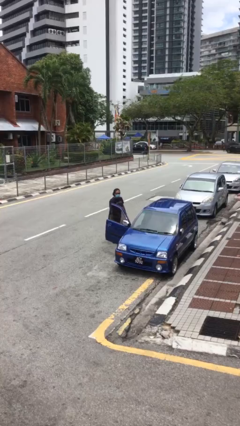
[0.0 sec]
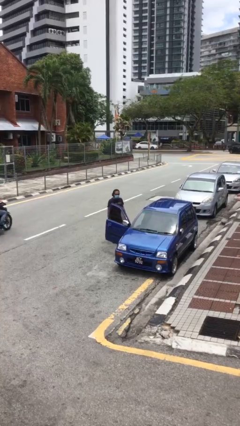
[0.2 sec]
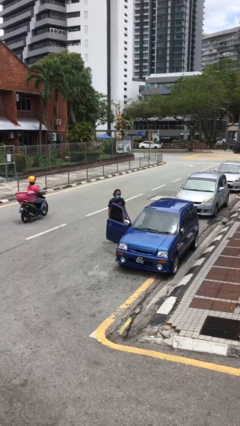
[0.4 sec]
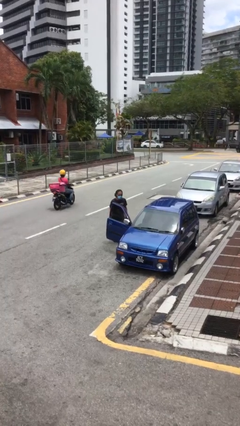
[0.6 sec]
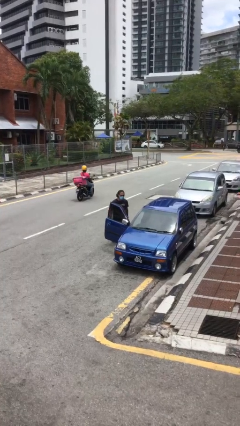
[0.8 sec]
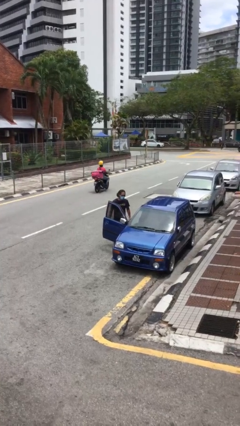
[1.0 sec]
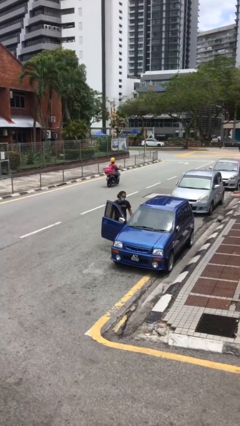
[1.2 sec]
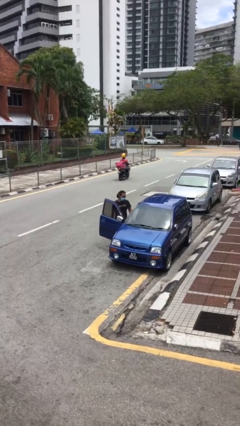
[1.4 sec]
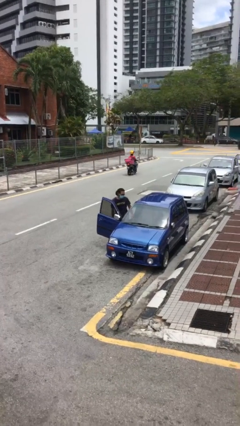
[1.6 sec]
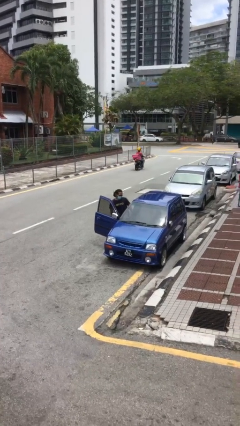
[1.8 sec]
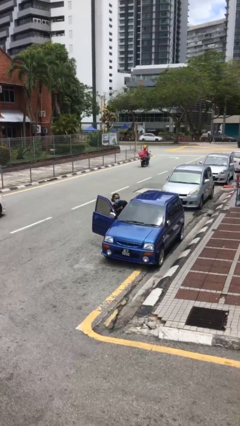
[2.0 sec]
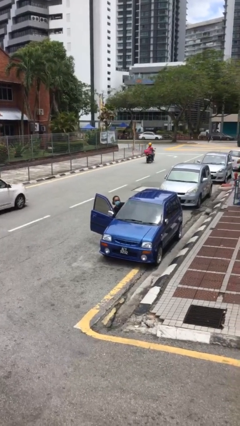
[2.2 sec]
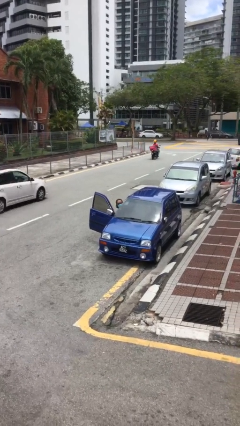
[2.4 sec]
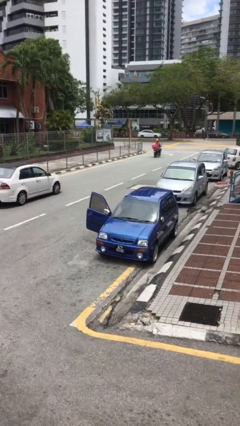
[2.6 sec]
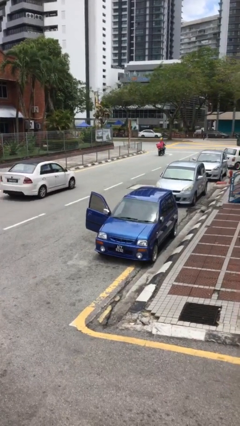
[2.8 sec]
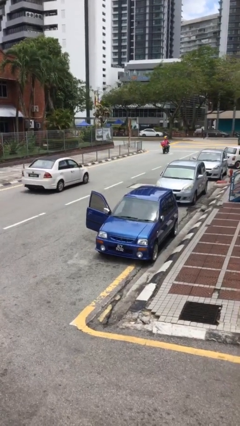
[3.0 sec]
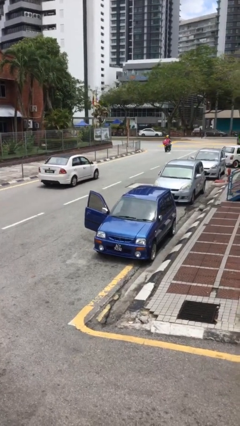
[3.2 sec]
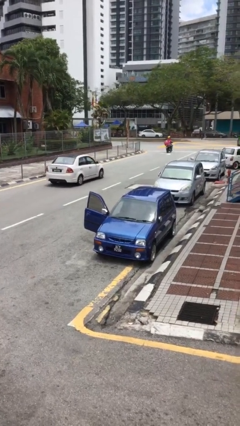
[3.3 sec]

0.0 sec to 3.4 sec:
person enters car

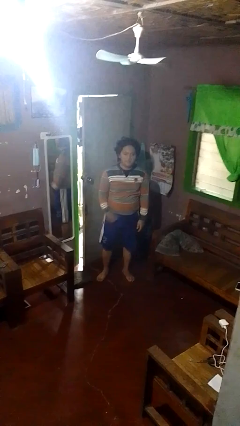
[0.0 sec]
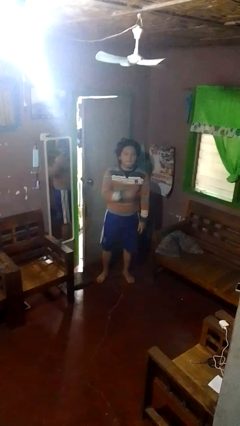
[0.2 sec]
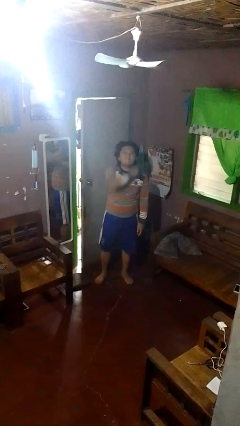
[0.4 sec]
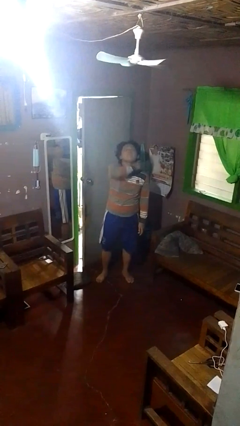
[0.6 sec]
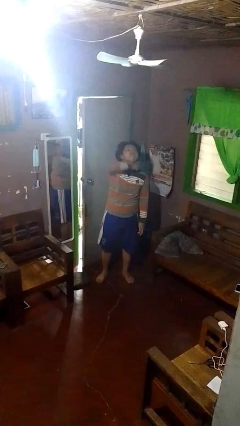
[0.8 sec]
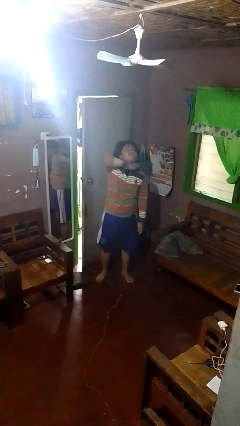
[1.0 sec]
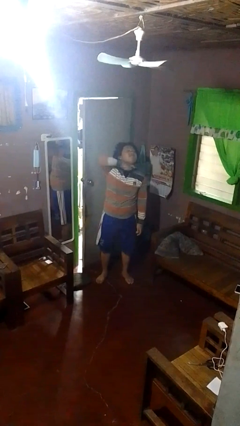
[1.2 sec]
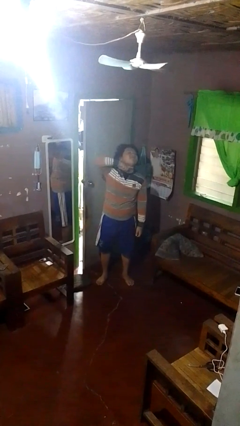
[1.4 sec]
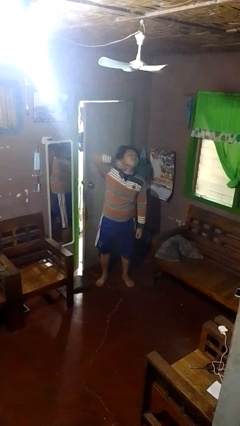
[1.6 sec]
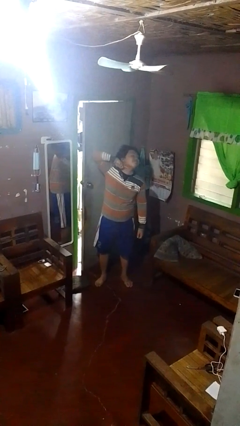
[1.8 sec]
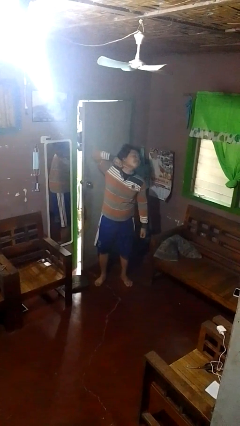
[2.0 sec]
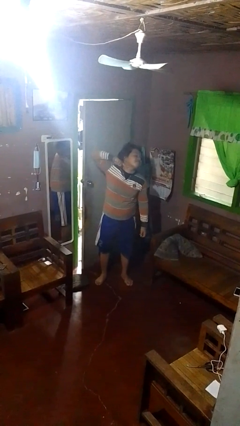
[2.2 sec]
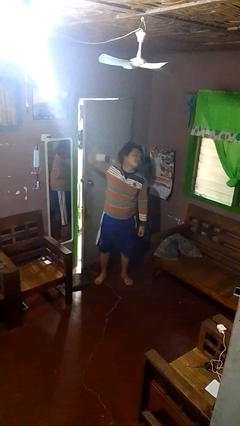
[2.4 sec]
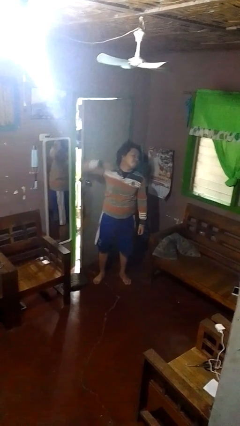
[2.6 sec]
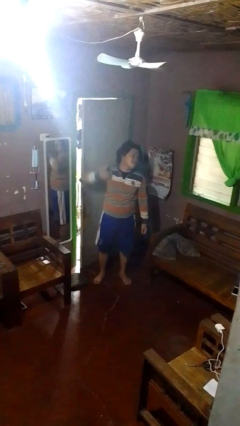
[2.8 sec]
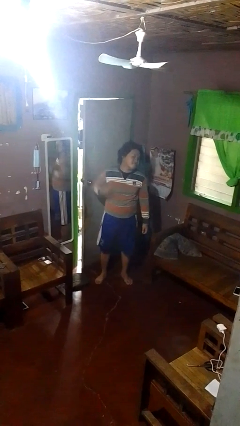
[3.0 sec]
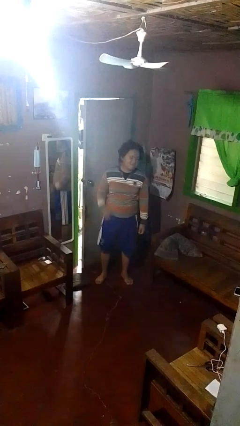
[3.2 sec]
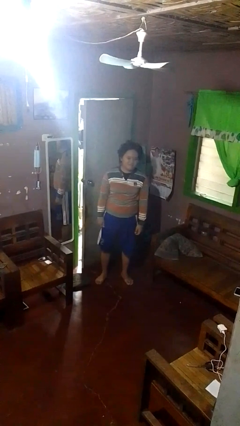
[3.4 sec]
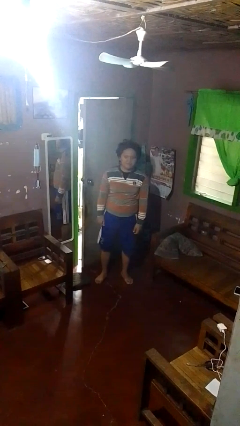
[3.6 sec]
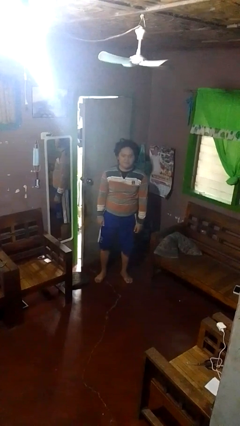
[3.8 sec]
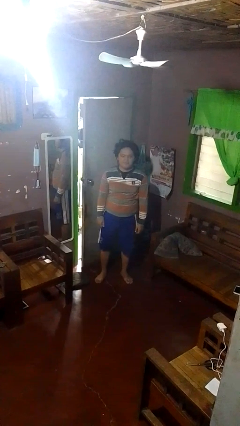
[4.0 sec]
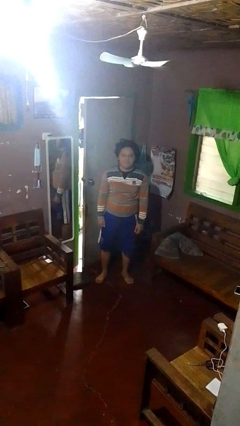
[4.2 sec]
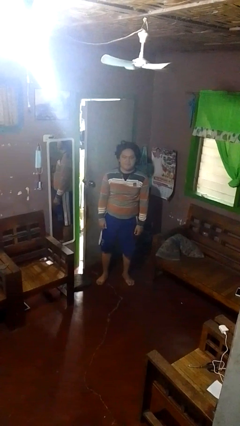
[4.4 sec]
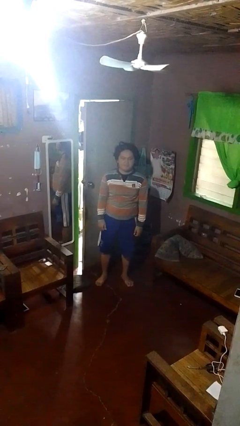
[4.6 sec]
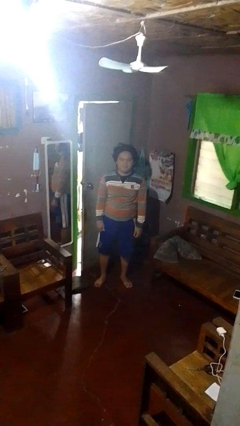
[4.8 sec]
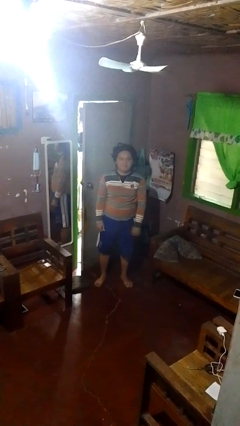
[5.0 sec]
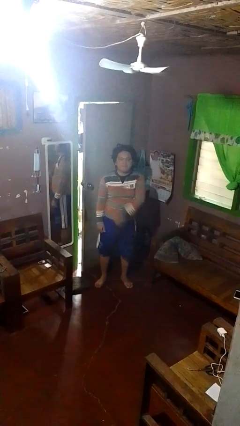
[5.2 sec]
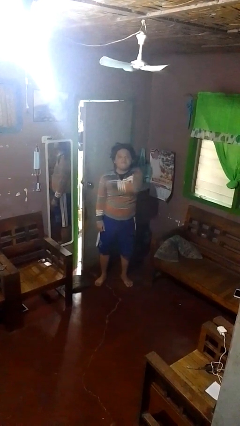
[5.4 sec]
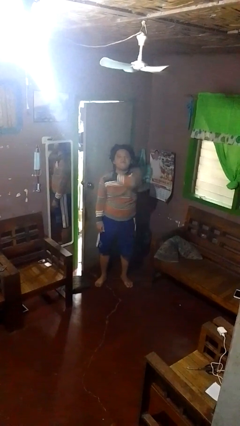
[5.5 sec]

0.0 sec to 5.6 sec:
person dries hair with hairdryer

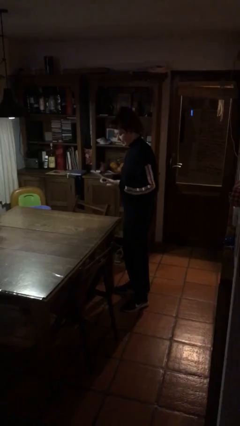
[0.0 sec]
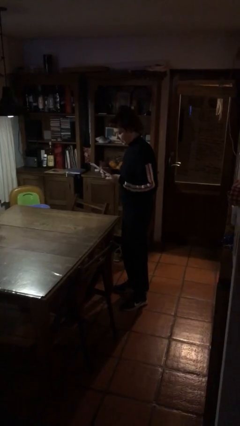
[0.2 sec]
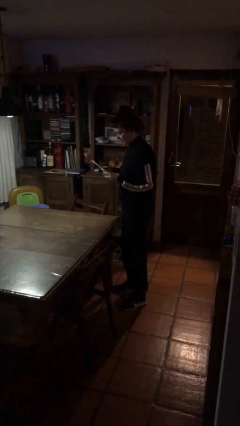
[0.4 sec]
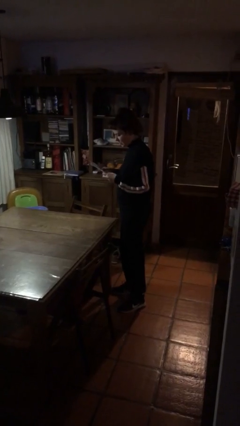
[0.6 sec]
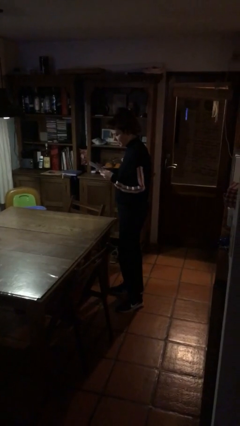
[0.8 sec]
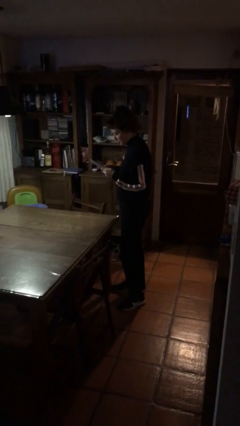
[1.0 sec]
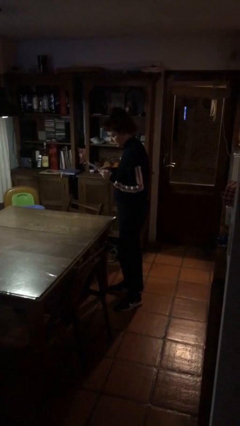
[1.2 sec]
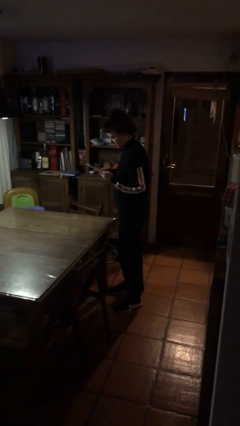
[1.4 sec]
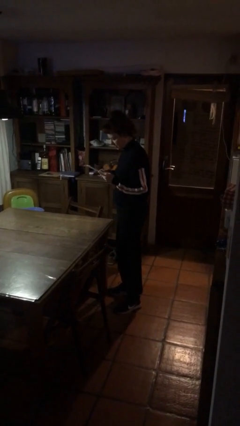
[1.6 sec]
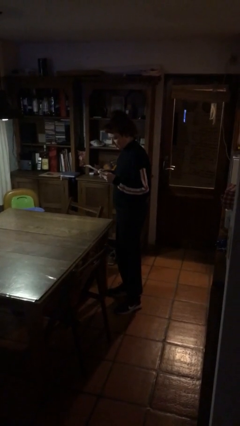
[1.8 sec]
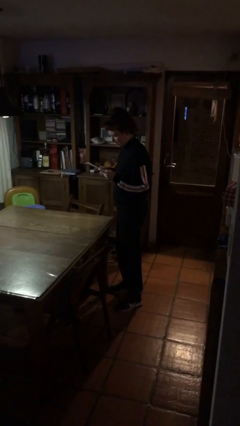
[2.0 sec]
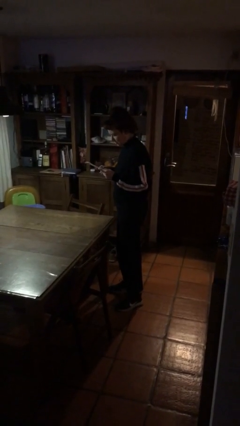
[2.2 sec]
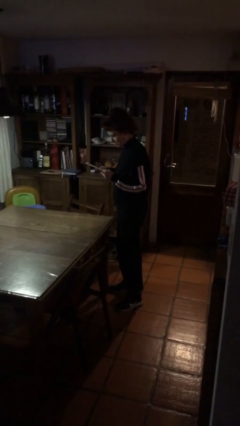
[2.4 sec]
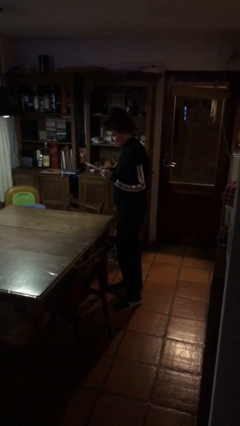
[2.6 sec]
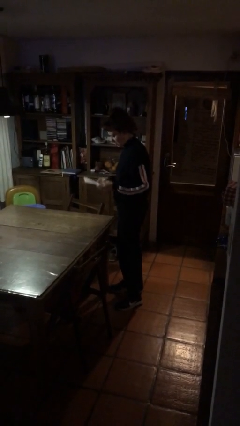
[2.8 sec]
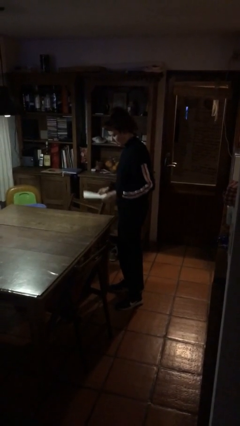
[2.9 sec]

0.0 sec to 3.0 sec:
person reads document

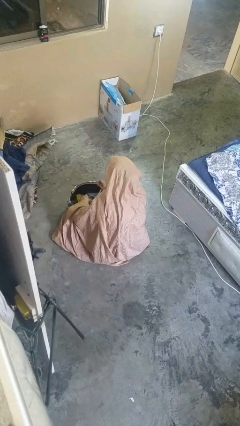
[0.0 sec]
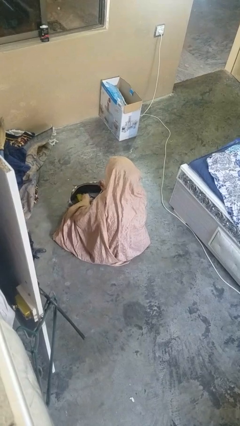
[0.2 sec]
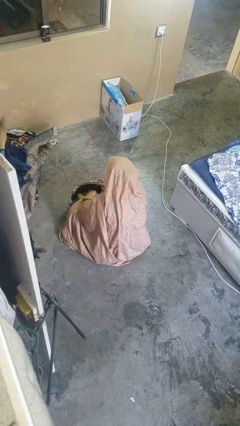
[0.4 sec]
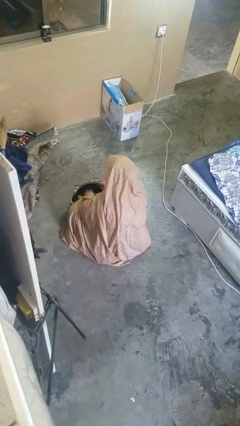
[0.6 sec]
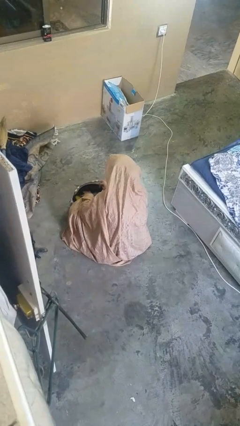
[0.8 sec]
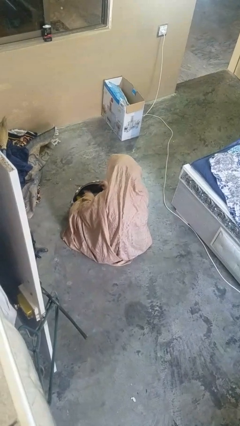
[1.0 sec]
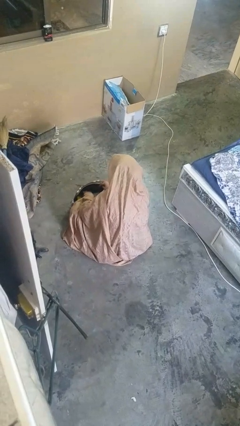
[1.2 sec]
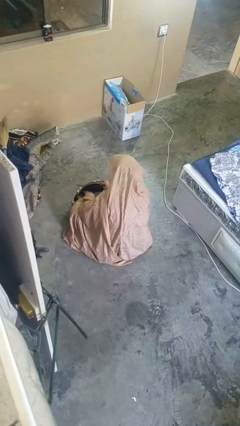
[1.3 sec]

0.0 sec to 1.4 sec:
person searches in purse

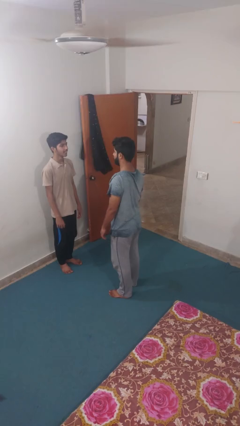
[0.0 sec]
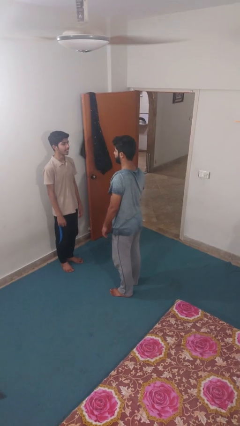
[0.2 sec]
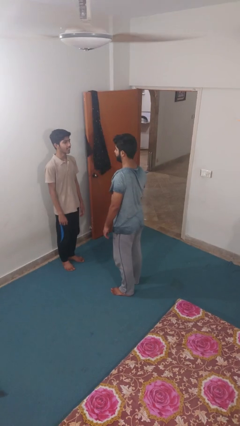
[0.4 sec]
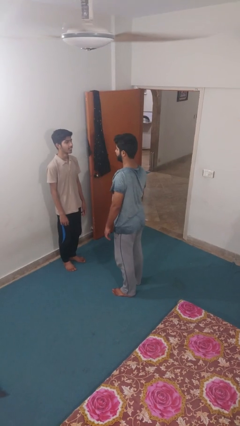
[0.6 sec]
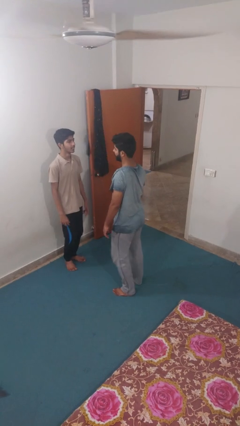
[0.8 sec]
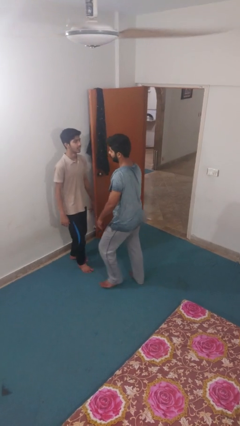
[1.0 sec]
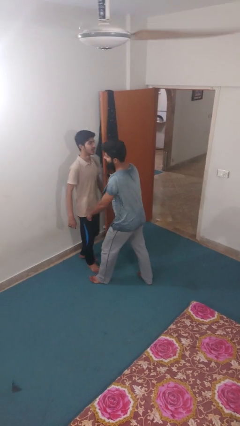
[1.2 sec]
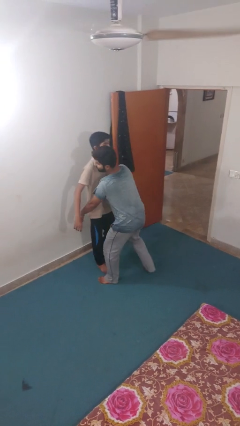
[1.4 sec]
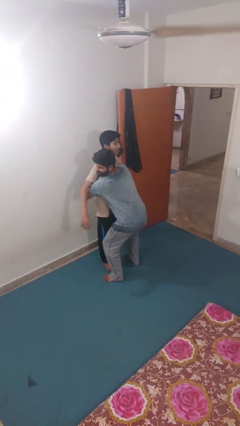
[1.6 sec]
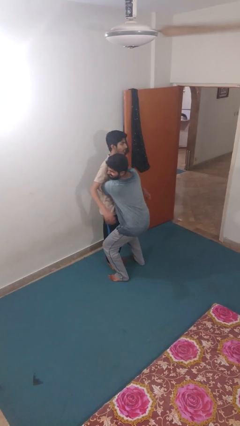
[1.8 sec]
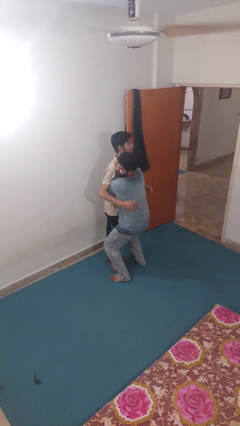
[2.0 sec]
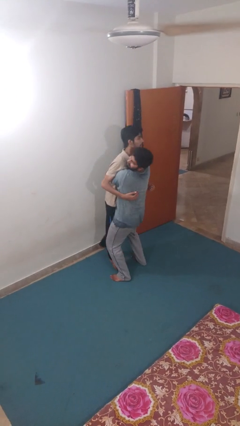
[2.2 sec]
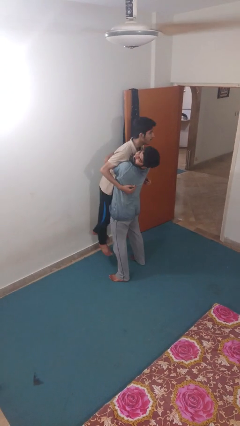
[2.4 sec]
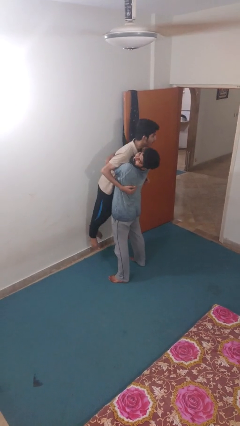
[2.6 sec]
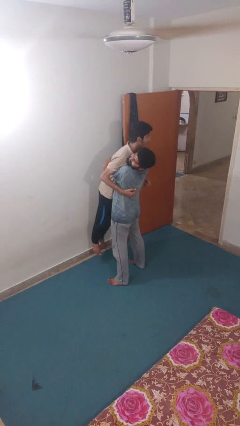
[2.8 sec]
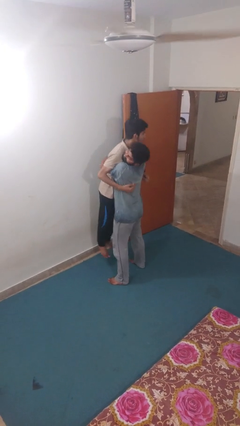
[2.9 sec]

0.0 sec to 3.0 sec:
person picks up person

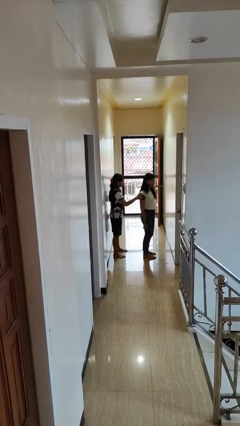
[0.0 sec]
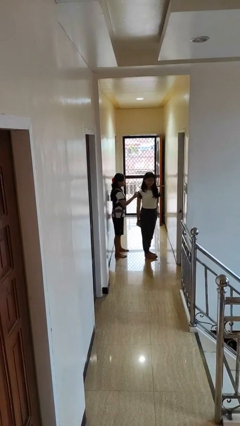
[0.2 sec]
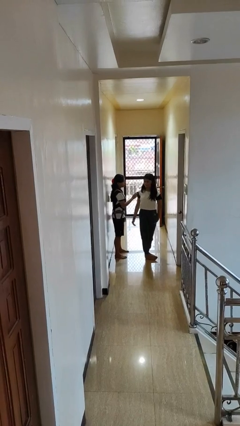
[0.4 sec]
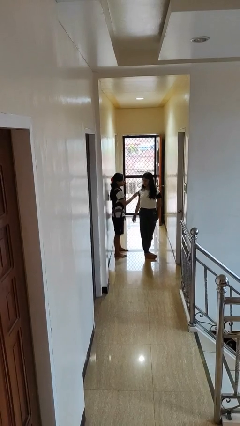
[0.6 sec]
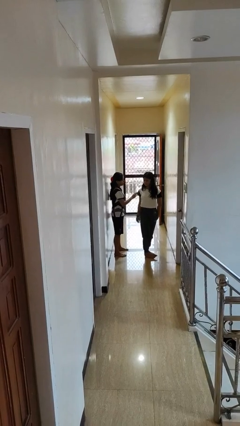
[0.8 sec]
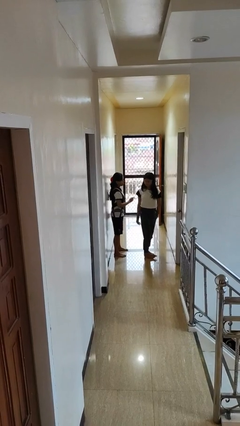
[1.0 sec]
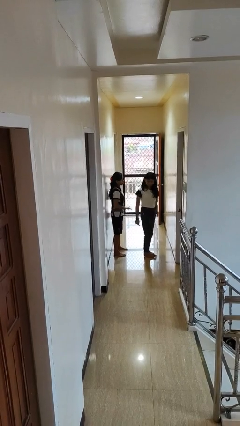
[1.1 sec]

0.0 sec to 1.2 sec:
person spins person around
